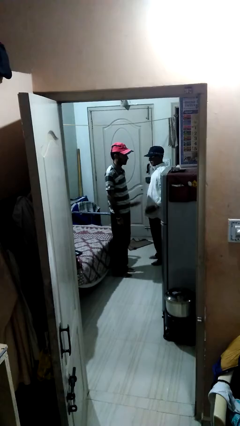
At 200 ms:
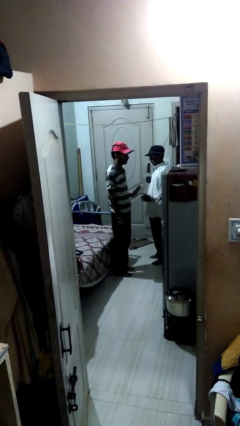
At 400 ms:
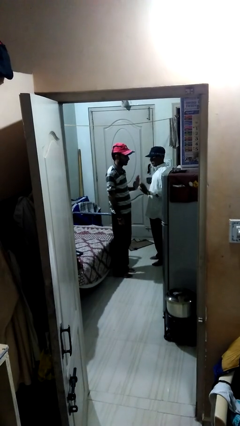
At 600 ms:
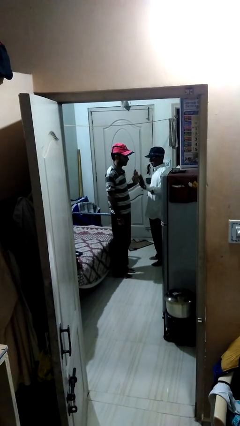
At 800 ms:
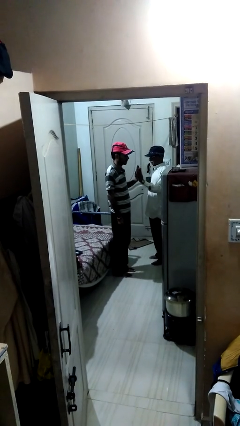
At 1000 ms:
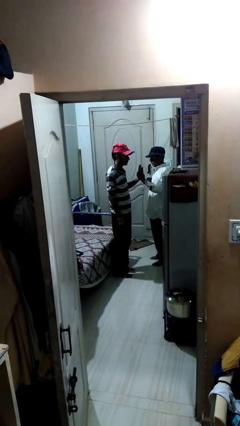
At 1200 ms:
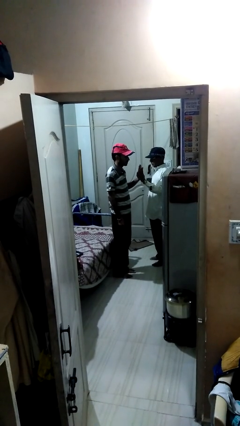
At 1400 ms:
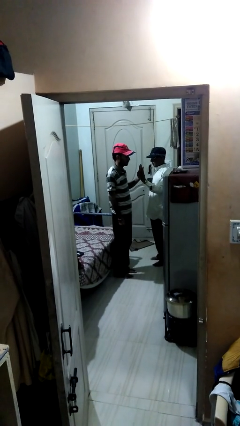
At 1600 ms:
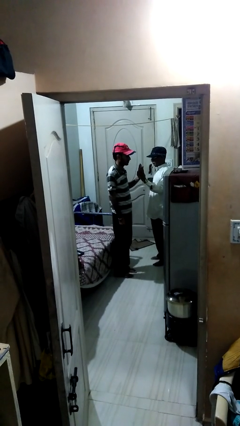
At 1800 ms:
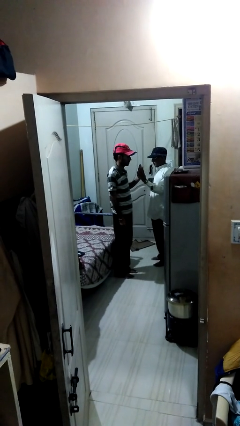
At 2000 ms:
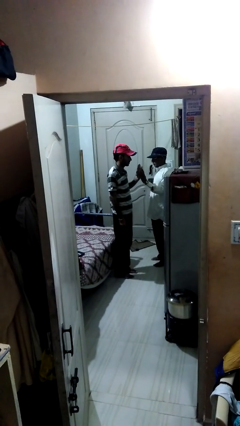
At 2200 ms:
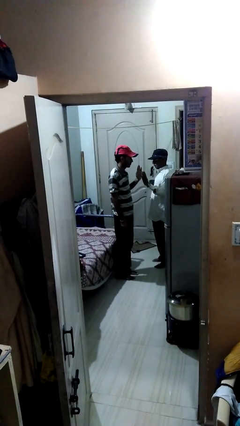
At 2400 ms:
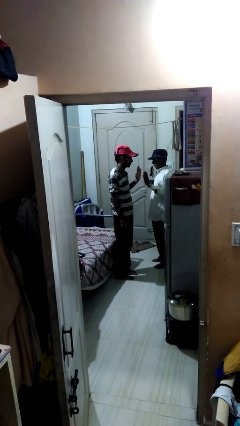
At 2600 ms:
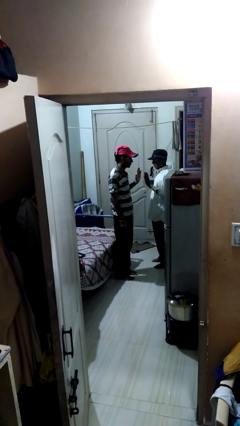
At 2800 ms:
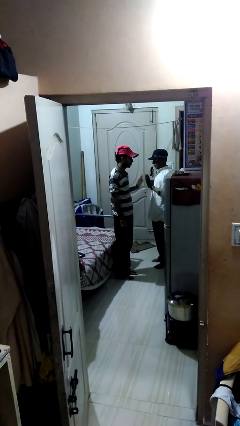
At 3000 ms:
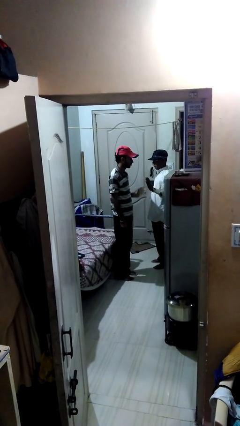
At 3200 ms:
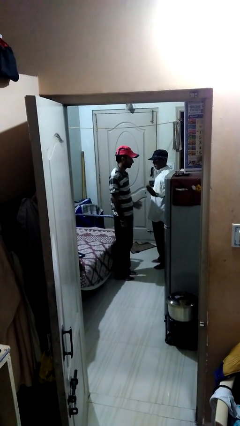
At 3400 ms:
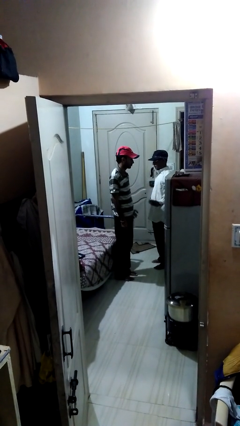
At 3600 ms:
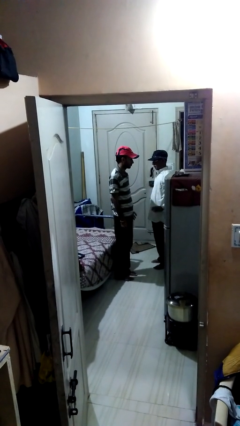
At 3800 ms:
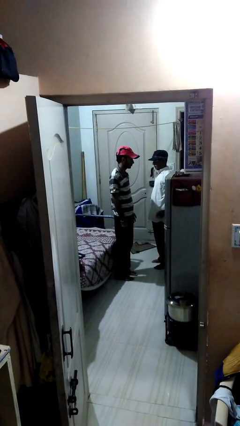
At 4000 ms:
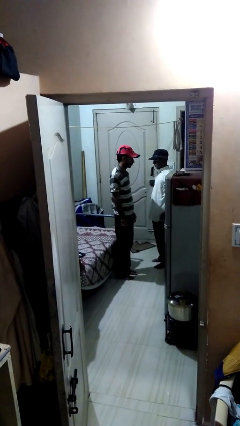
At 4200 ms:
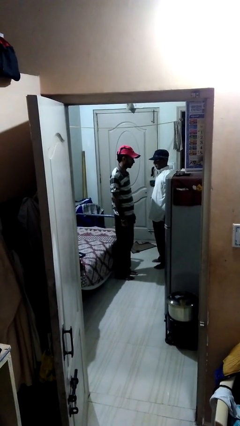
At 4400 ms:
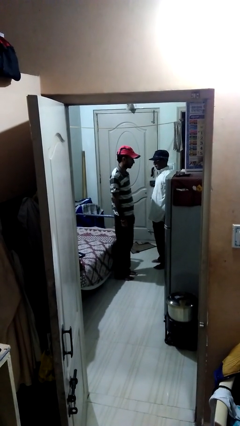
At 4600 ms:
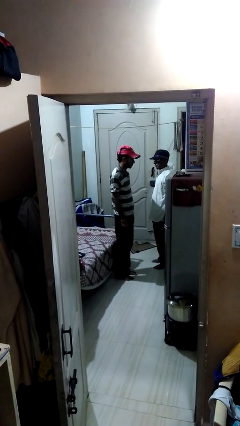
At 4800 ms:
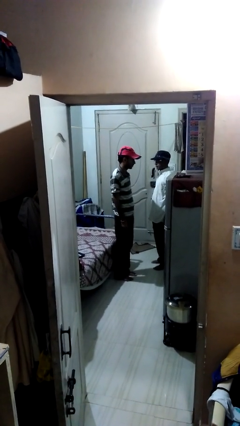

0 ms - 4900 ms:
person highfives hand

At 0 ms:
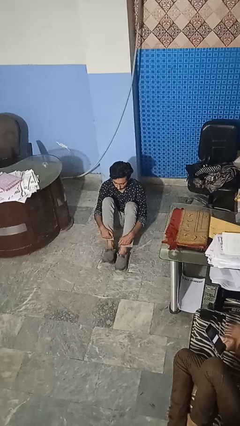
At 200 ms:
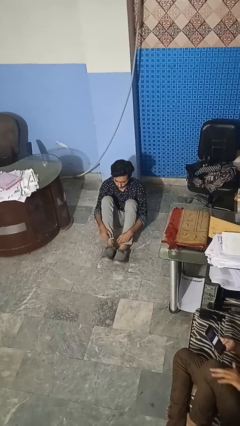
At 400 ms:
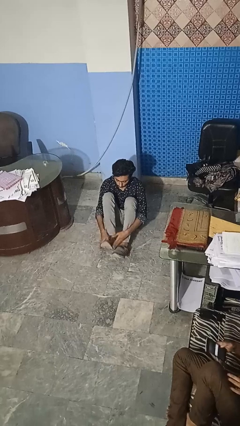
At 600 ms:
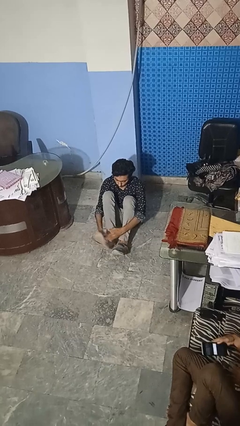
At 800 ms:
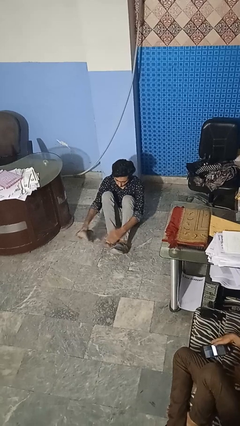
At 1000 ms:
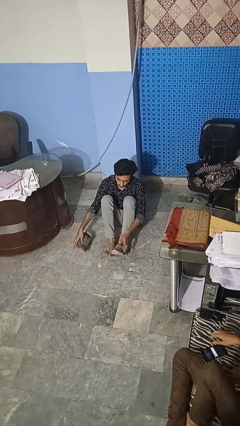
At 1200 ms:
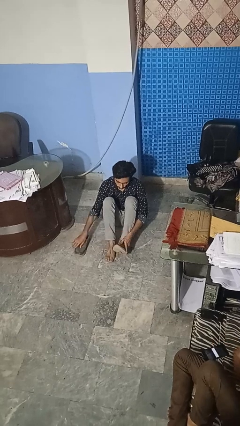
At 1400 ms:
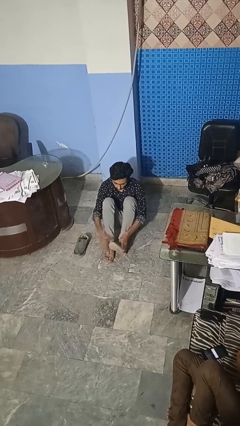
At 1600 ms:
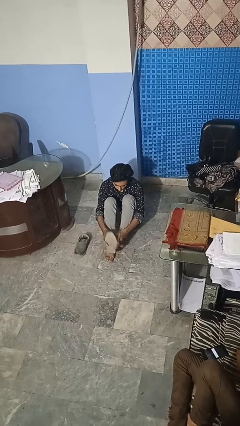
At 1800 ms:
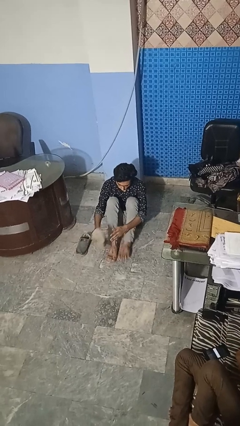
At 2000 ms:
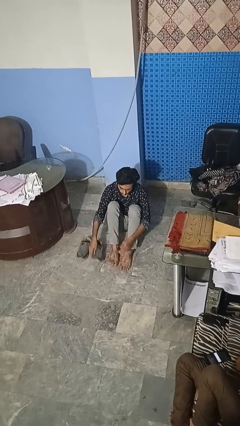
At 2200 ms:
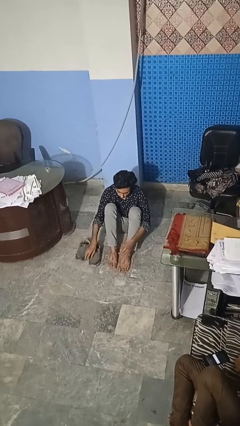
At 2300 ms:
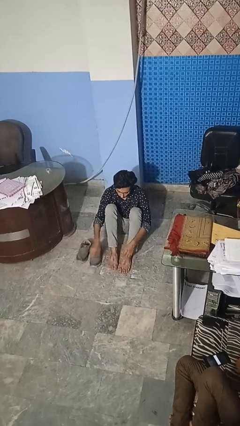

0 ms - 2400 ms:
person takes off shoes

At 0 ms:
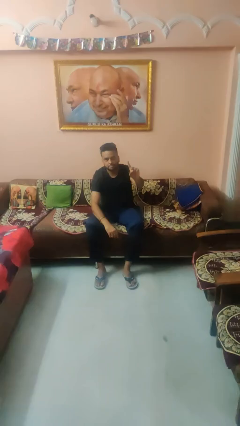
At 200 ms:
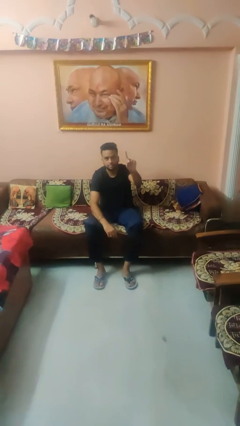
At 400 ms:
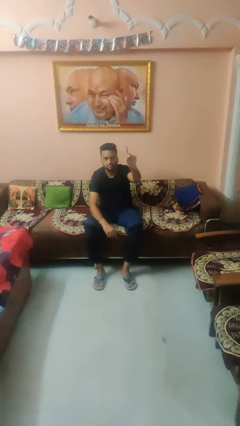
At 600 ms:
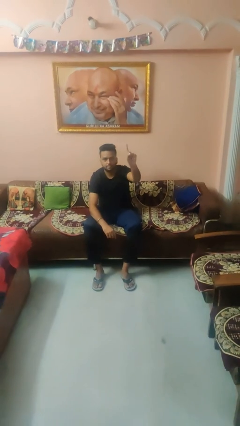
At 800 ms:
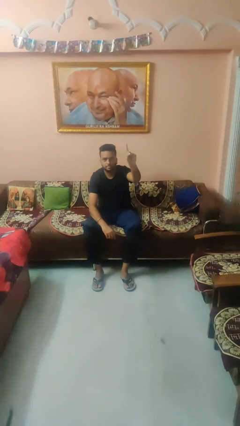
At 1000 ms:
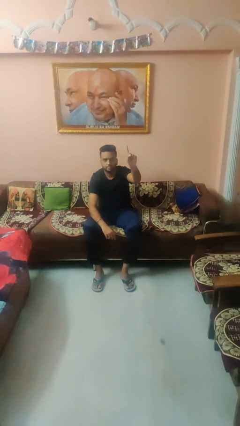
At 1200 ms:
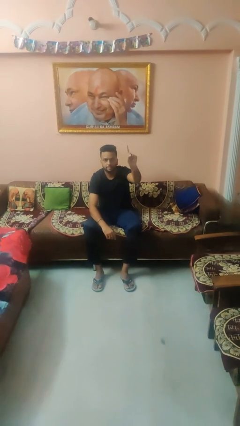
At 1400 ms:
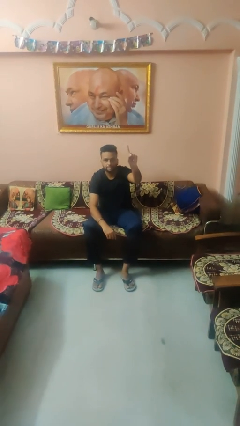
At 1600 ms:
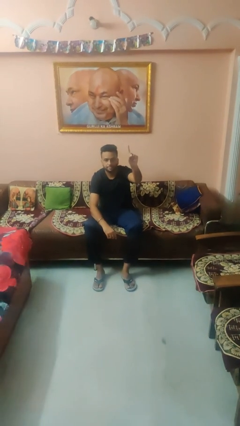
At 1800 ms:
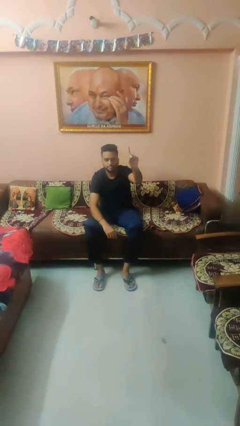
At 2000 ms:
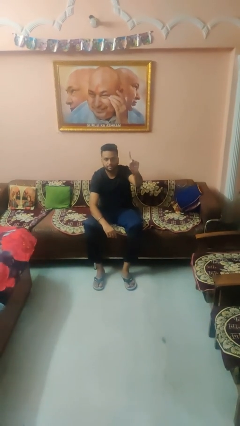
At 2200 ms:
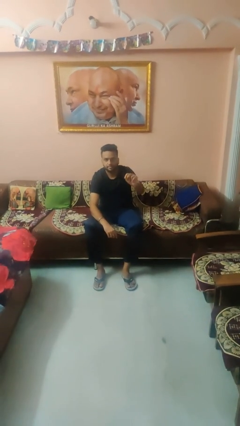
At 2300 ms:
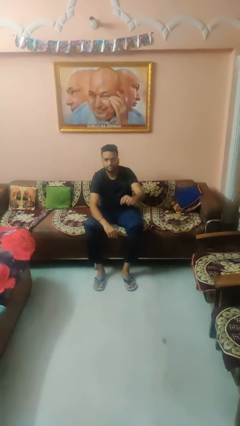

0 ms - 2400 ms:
person gestures number one

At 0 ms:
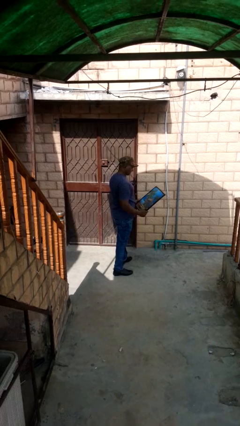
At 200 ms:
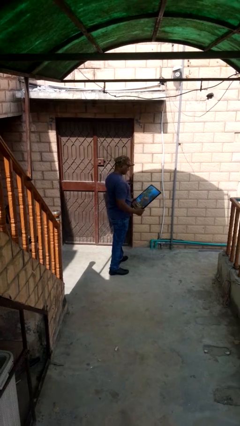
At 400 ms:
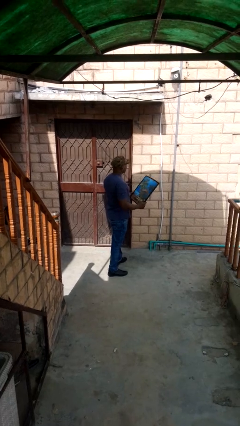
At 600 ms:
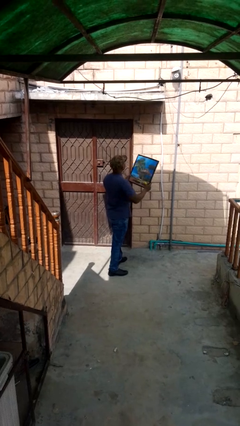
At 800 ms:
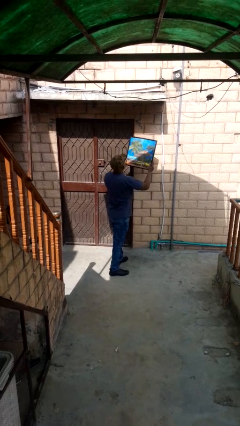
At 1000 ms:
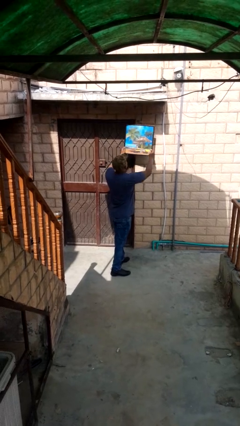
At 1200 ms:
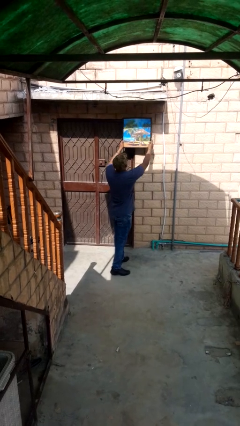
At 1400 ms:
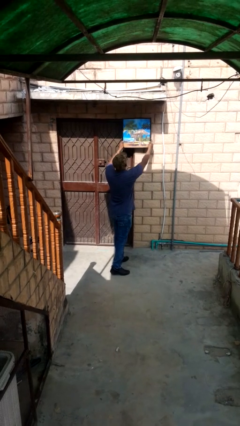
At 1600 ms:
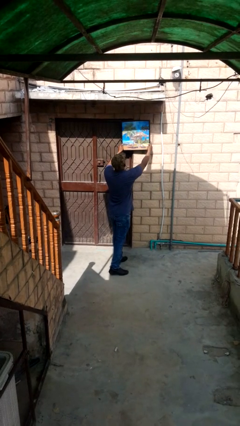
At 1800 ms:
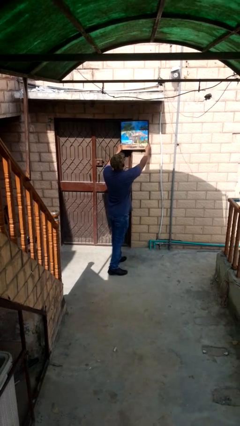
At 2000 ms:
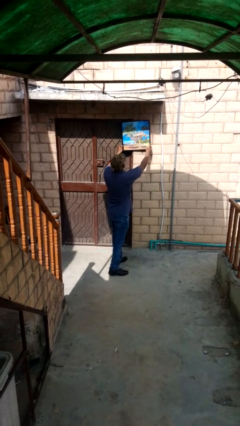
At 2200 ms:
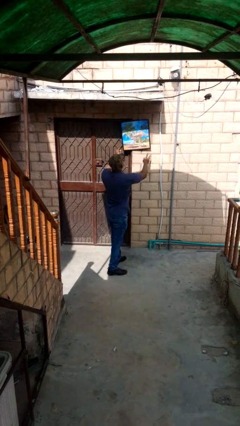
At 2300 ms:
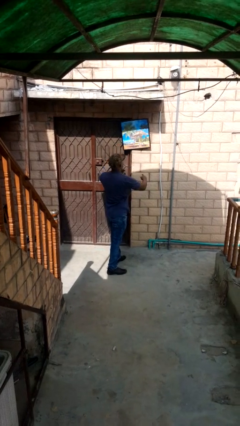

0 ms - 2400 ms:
person puts up picture frame

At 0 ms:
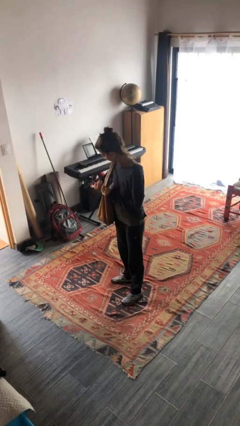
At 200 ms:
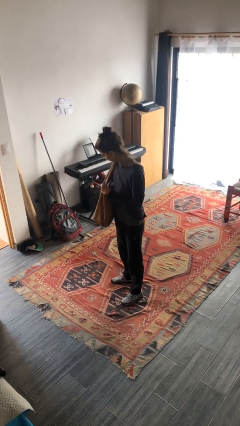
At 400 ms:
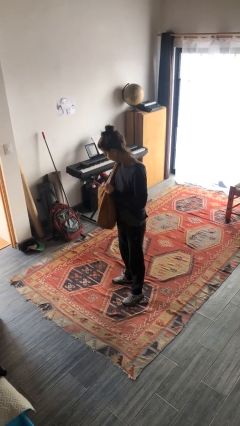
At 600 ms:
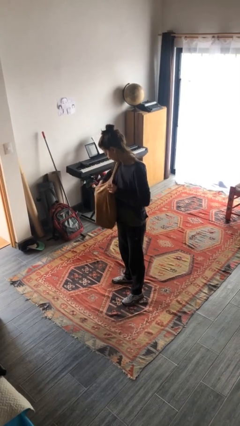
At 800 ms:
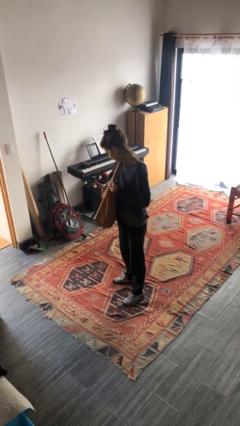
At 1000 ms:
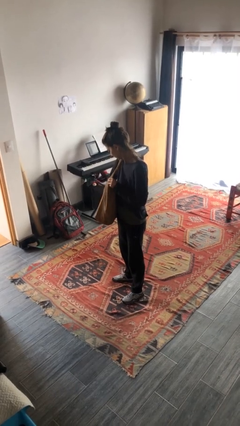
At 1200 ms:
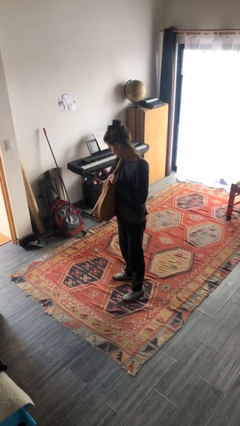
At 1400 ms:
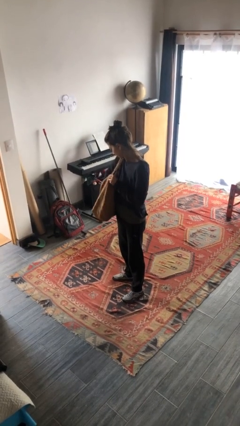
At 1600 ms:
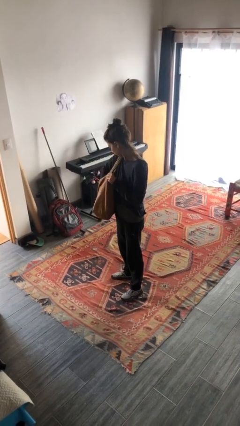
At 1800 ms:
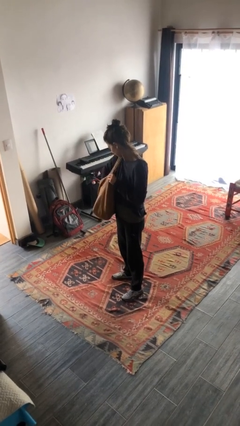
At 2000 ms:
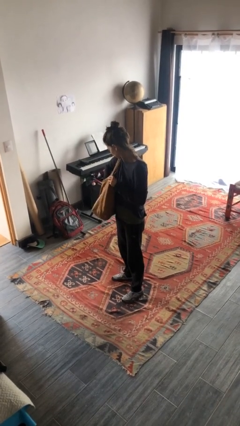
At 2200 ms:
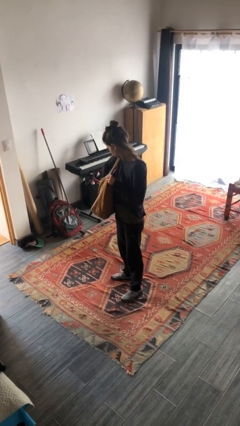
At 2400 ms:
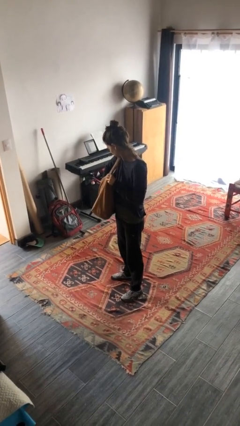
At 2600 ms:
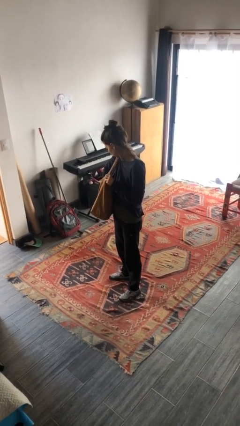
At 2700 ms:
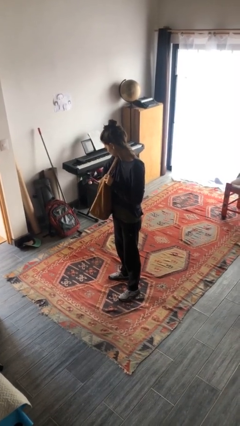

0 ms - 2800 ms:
person searches in purse

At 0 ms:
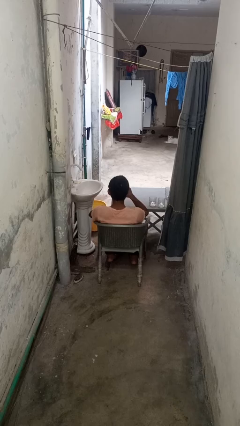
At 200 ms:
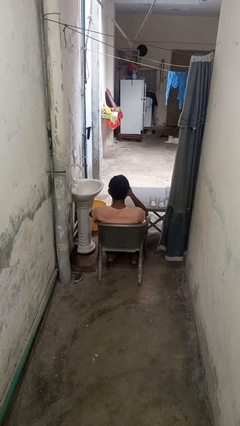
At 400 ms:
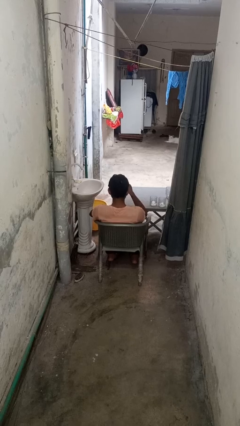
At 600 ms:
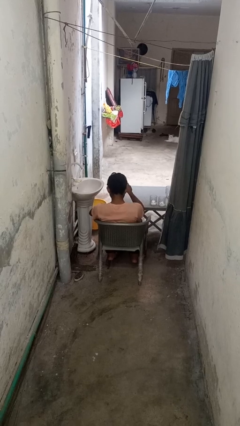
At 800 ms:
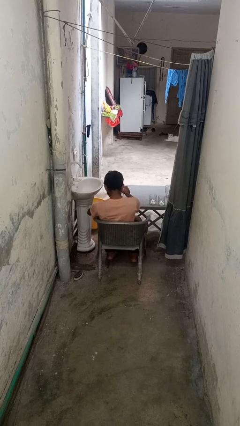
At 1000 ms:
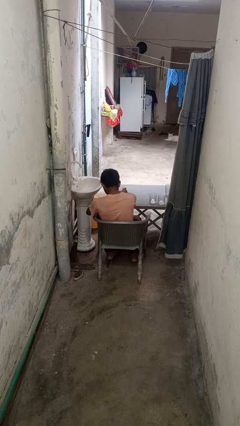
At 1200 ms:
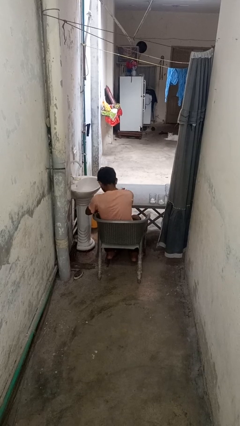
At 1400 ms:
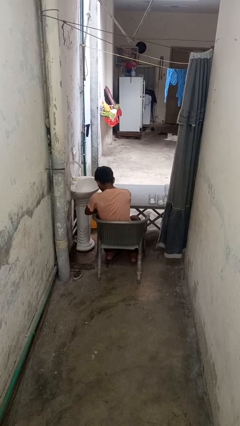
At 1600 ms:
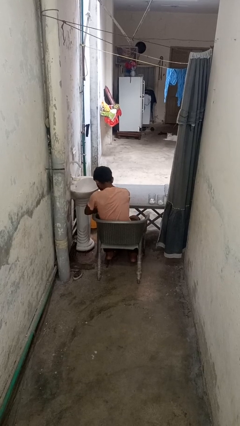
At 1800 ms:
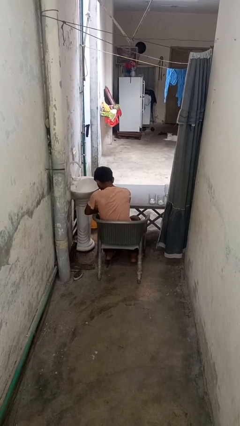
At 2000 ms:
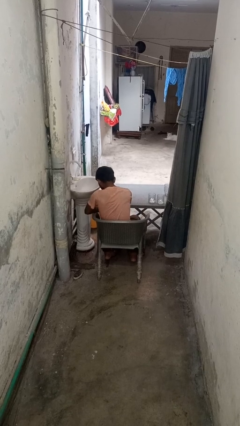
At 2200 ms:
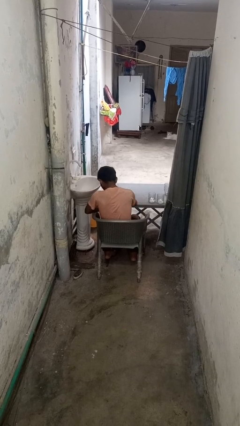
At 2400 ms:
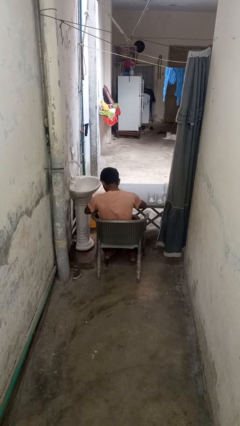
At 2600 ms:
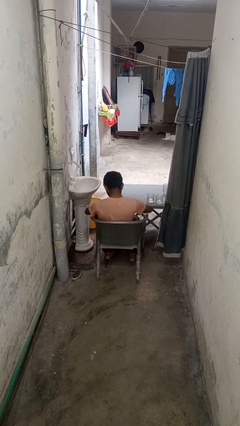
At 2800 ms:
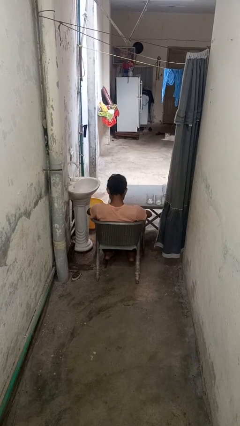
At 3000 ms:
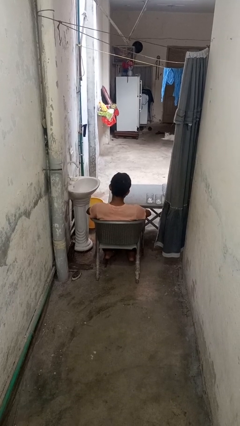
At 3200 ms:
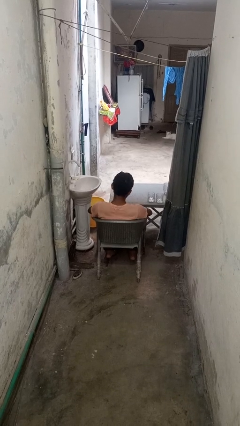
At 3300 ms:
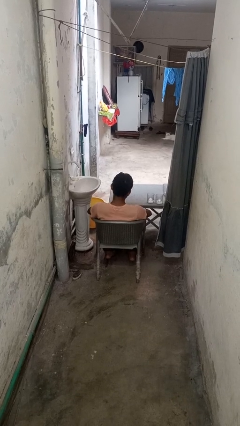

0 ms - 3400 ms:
person puts down object on table
